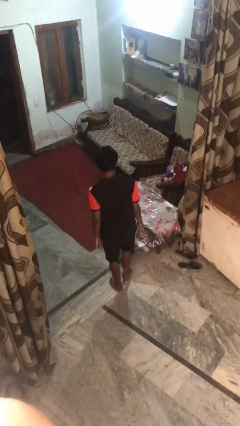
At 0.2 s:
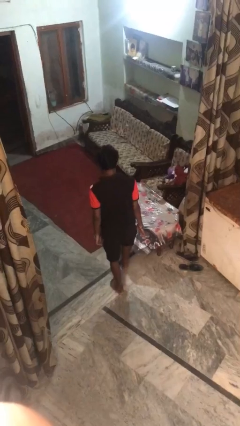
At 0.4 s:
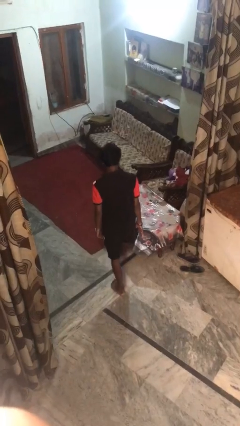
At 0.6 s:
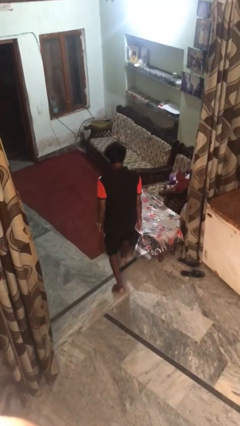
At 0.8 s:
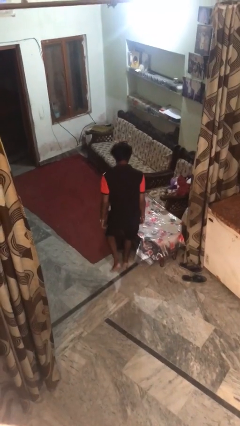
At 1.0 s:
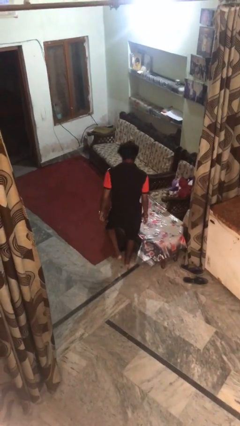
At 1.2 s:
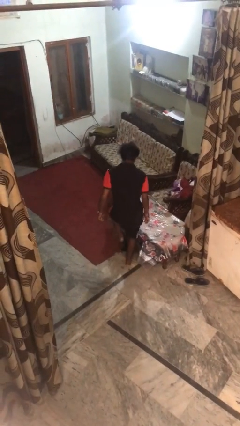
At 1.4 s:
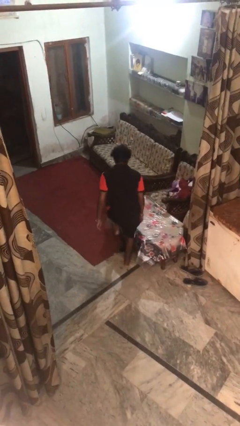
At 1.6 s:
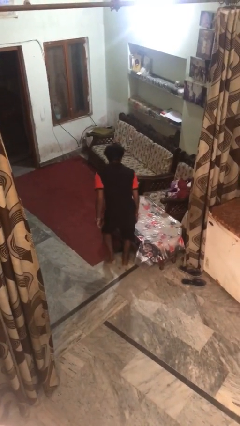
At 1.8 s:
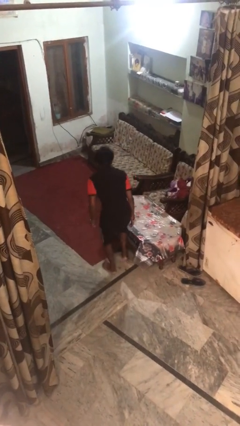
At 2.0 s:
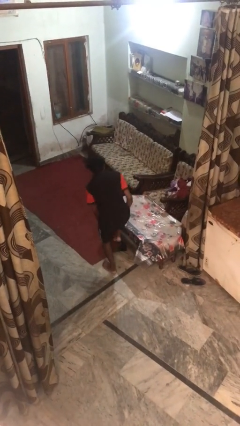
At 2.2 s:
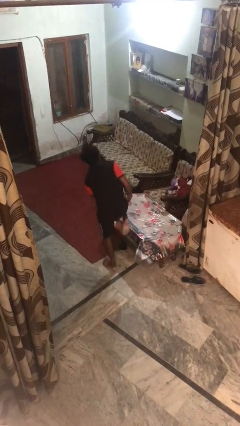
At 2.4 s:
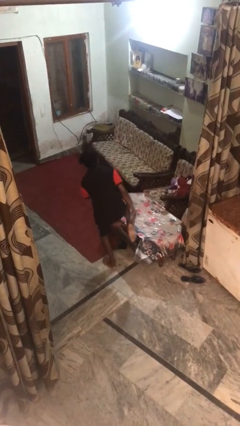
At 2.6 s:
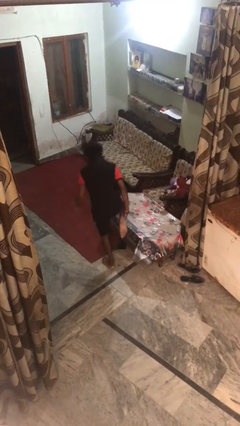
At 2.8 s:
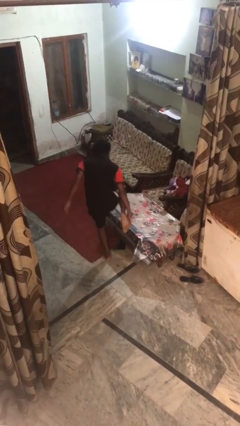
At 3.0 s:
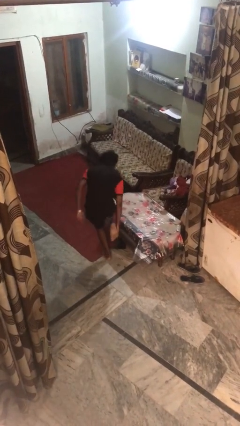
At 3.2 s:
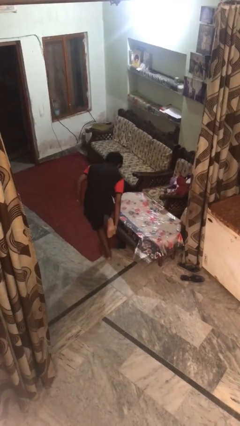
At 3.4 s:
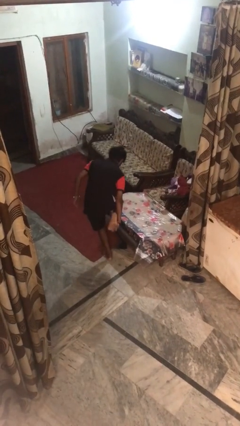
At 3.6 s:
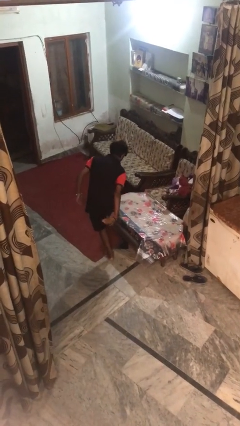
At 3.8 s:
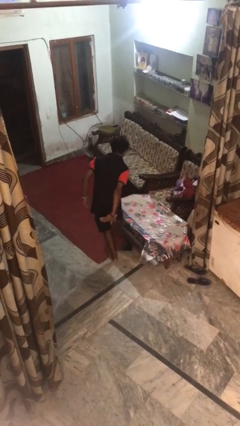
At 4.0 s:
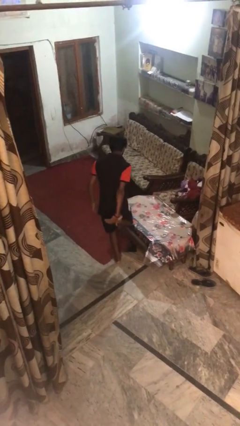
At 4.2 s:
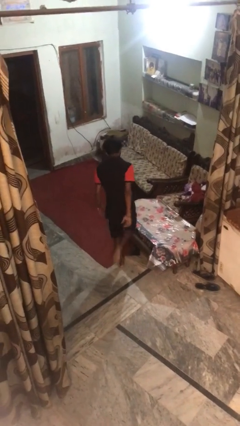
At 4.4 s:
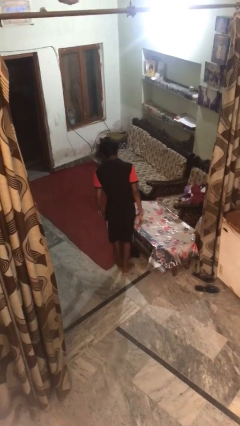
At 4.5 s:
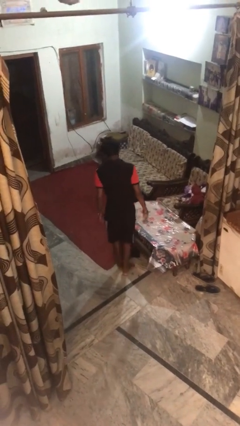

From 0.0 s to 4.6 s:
person stubs toe

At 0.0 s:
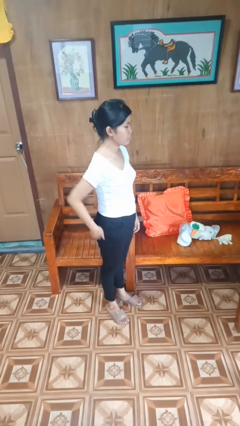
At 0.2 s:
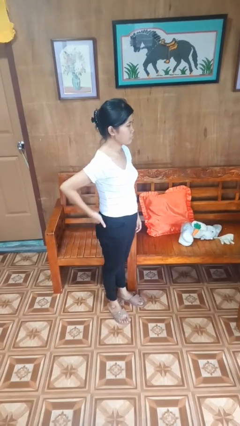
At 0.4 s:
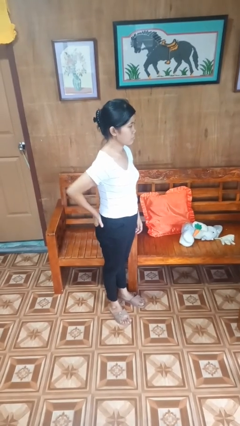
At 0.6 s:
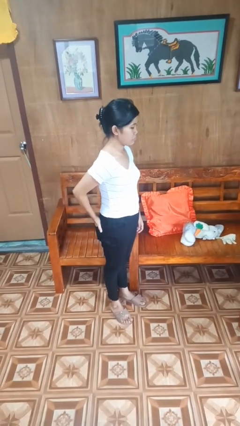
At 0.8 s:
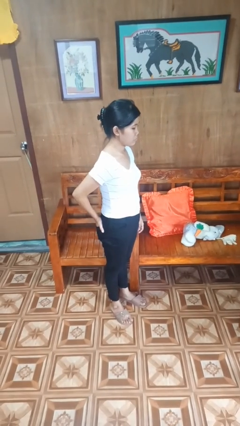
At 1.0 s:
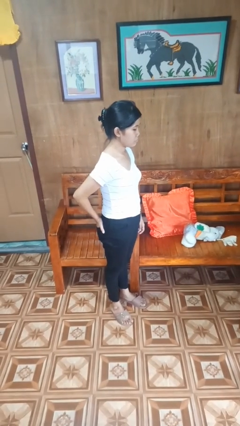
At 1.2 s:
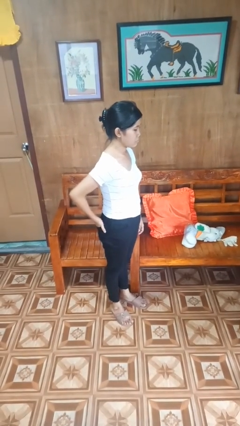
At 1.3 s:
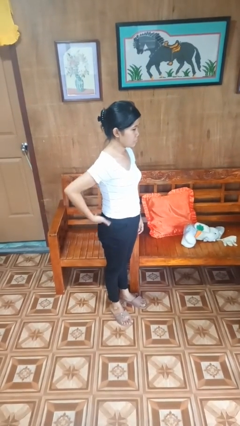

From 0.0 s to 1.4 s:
person puts hands in back pockets

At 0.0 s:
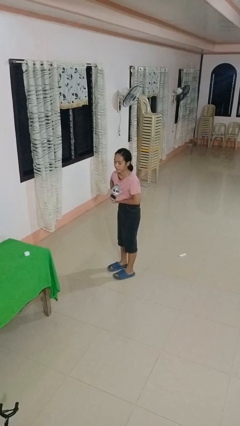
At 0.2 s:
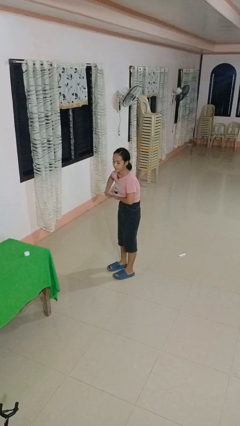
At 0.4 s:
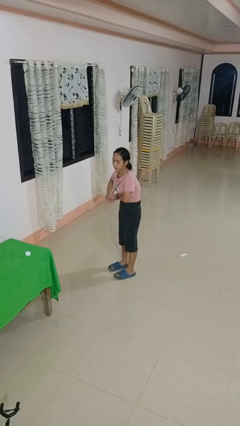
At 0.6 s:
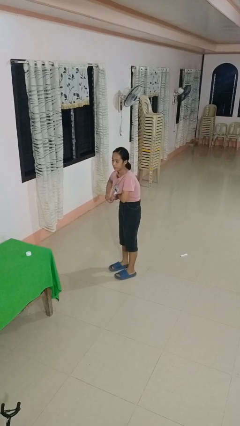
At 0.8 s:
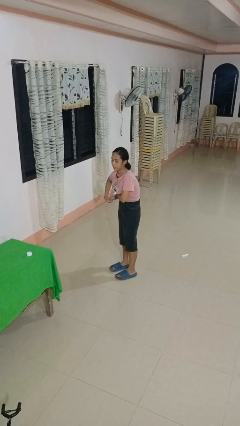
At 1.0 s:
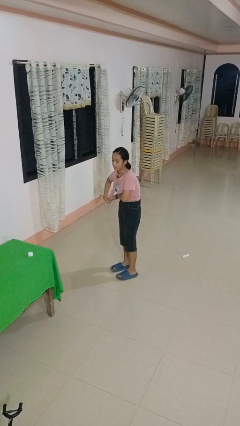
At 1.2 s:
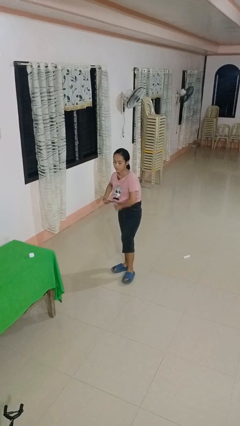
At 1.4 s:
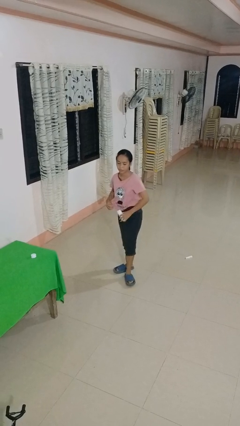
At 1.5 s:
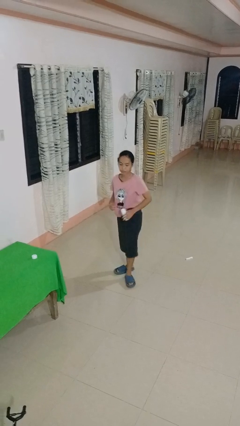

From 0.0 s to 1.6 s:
person applies deodorant

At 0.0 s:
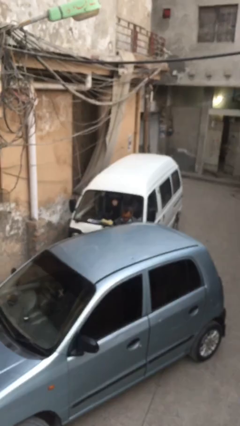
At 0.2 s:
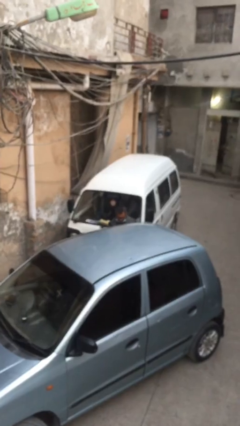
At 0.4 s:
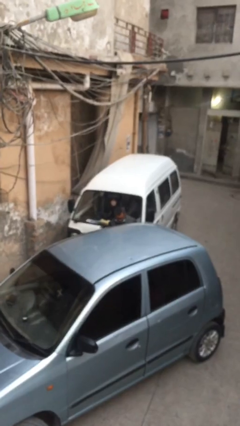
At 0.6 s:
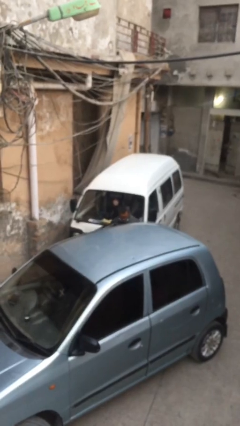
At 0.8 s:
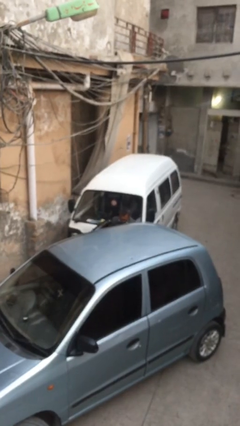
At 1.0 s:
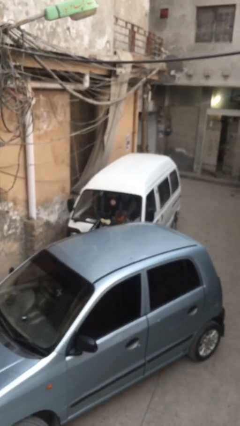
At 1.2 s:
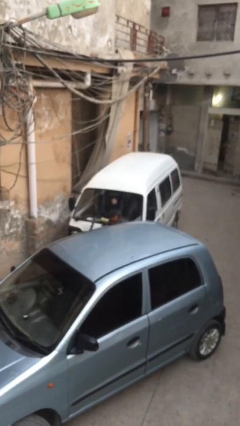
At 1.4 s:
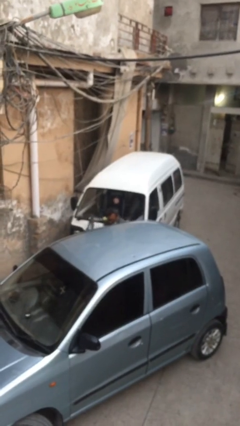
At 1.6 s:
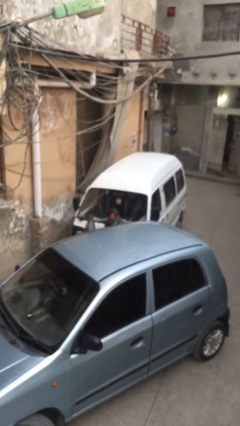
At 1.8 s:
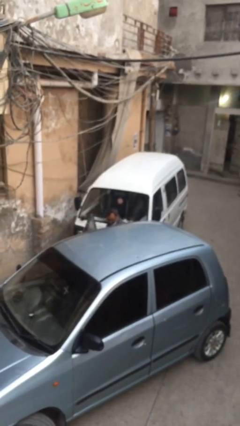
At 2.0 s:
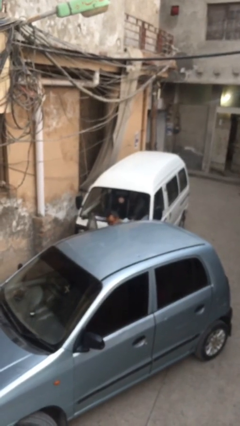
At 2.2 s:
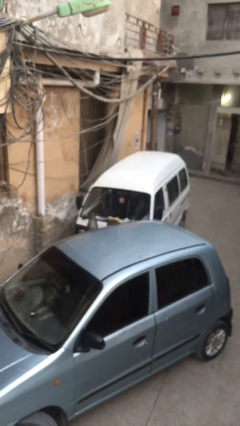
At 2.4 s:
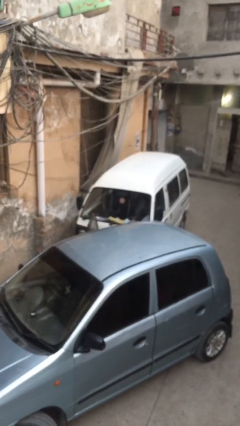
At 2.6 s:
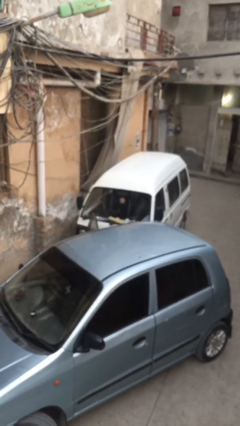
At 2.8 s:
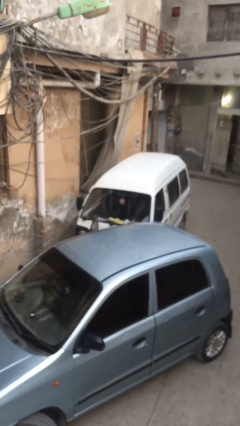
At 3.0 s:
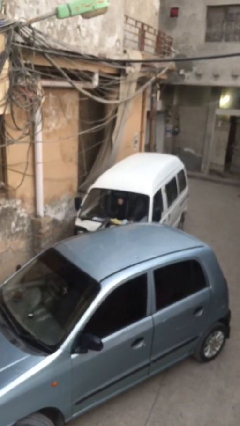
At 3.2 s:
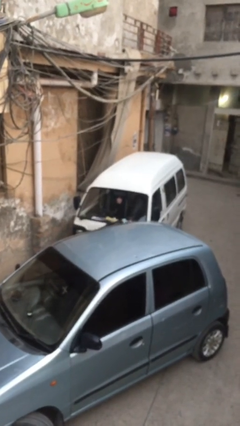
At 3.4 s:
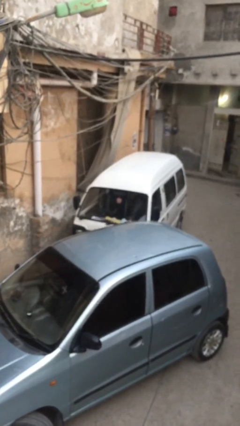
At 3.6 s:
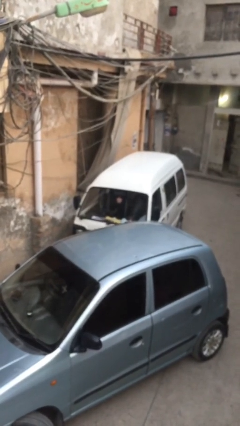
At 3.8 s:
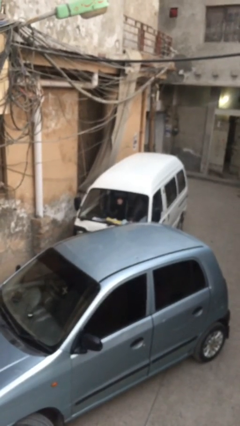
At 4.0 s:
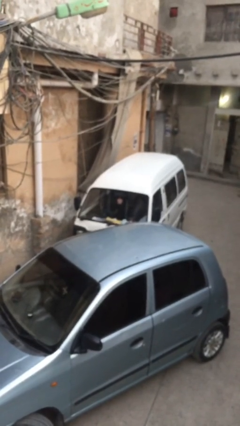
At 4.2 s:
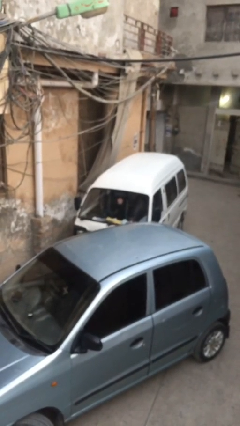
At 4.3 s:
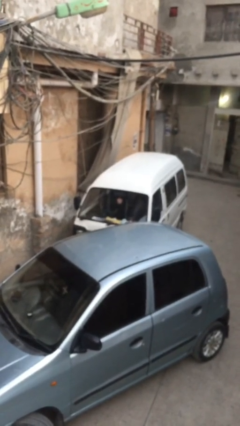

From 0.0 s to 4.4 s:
car picks up person

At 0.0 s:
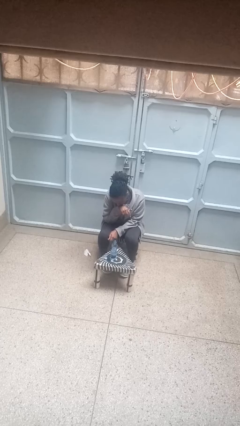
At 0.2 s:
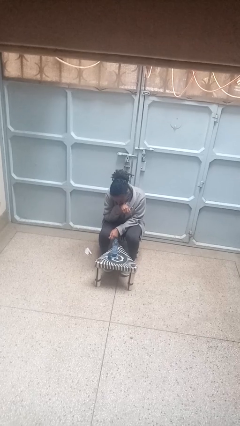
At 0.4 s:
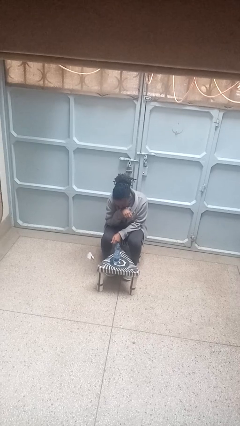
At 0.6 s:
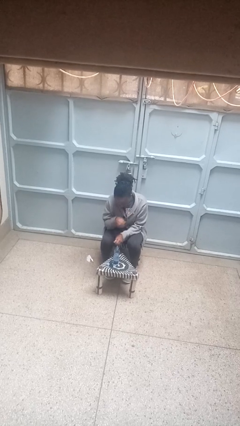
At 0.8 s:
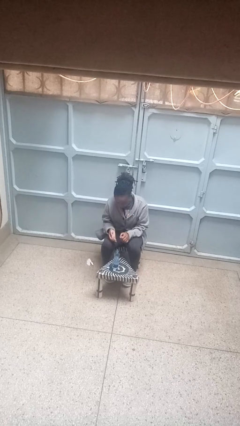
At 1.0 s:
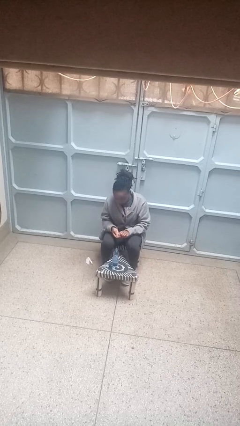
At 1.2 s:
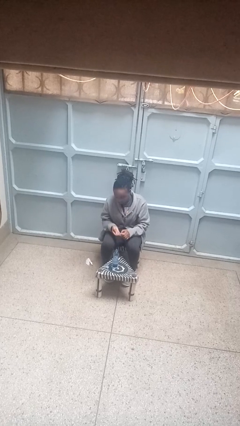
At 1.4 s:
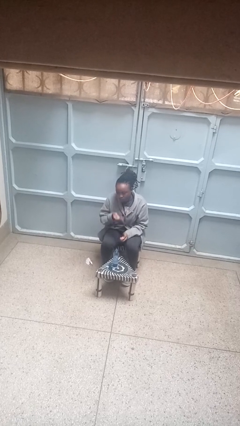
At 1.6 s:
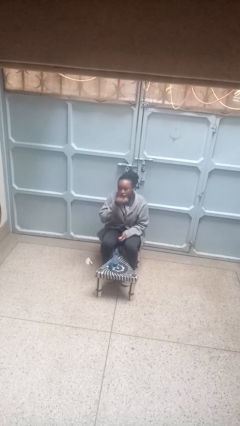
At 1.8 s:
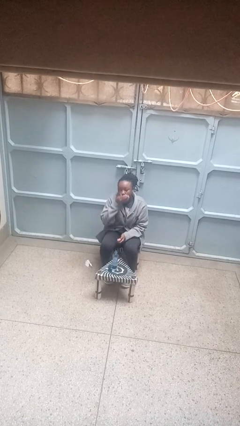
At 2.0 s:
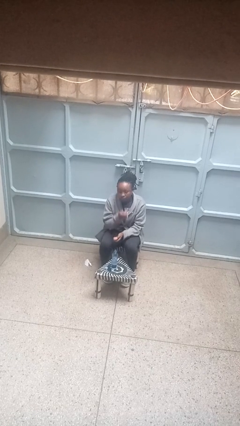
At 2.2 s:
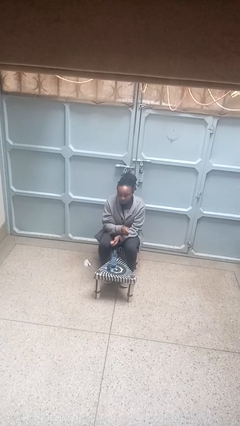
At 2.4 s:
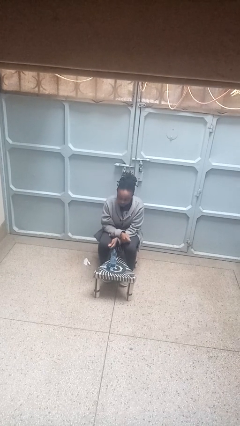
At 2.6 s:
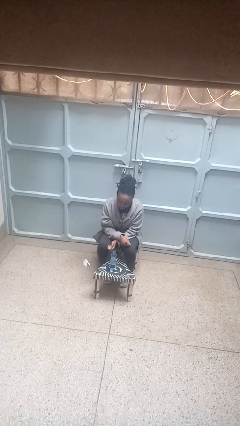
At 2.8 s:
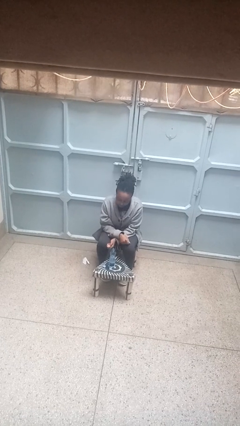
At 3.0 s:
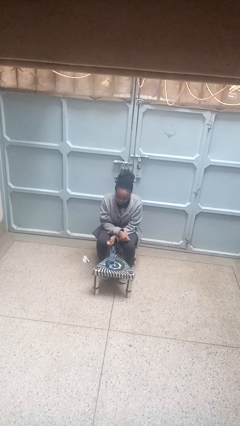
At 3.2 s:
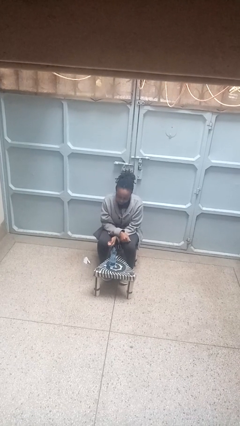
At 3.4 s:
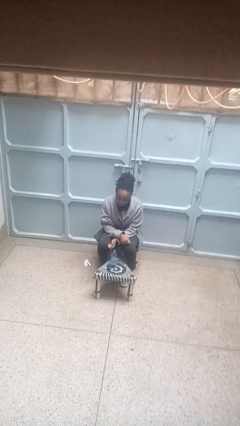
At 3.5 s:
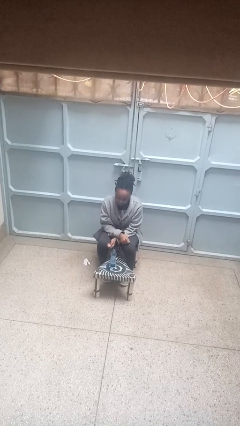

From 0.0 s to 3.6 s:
person takes medicine pills

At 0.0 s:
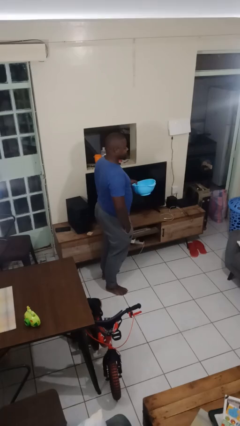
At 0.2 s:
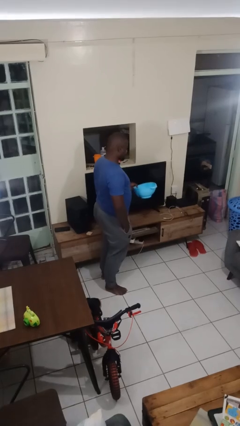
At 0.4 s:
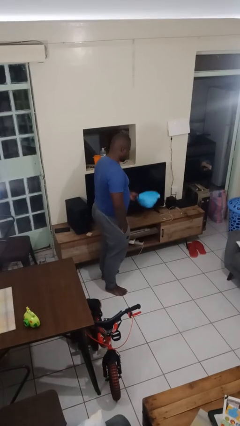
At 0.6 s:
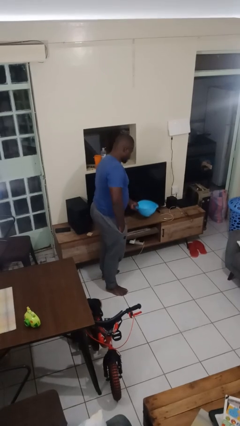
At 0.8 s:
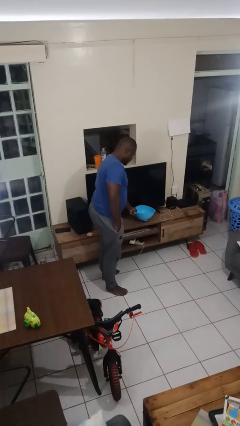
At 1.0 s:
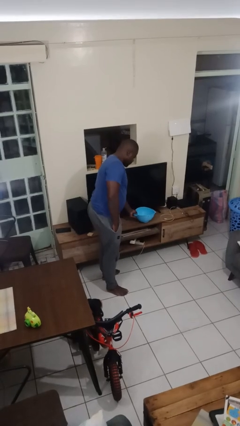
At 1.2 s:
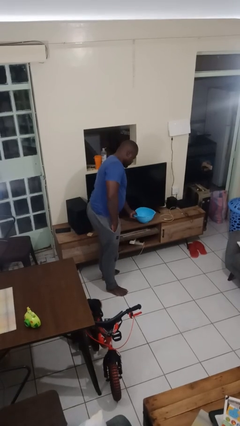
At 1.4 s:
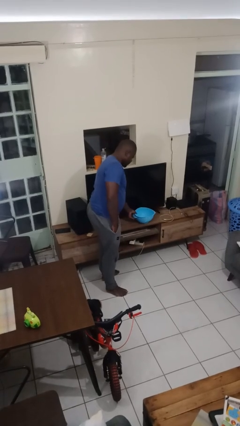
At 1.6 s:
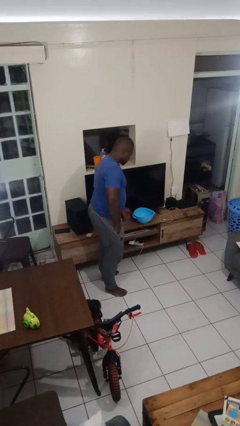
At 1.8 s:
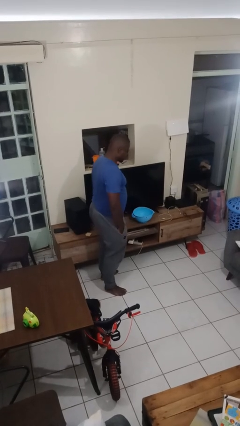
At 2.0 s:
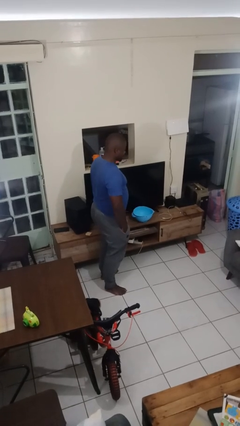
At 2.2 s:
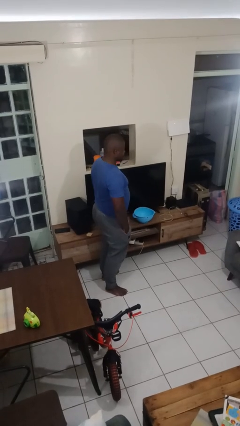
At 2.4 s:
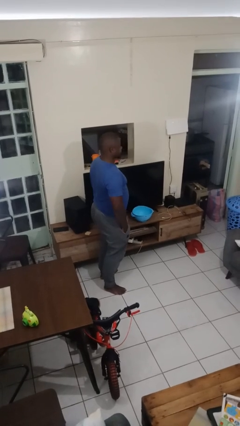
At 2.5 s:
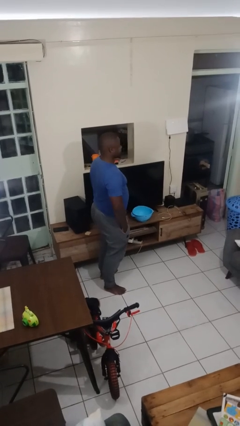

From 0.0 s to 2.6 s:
person puts down object on countertop
